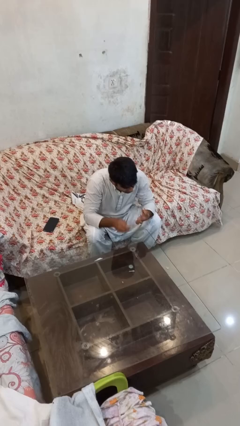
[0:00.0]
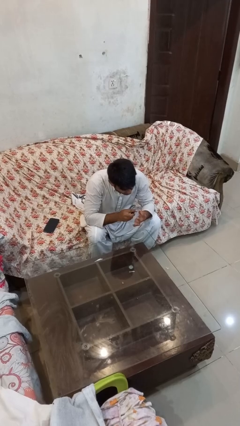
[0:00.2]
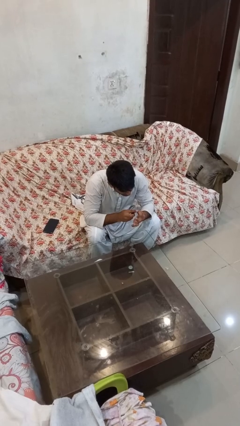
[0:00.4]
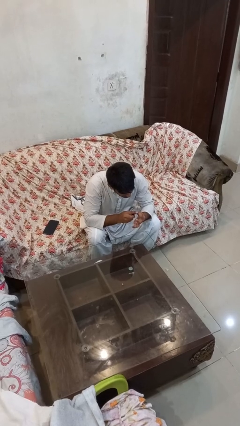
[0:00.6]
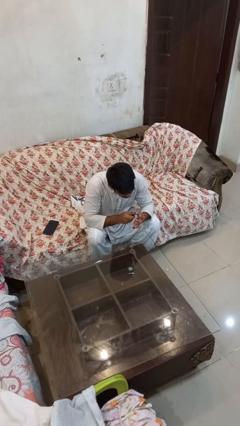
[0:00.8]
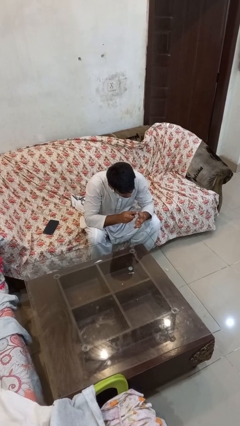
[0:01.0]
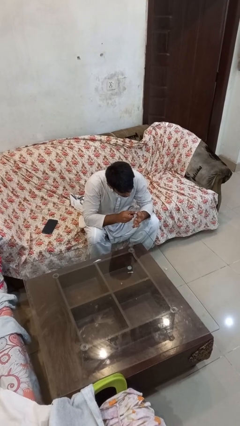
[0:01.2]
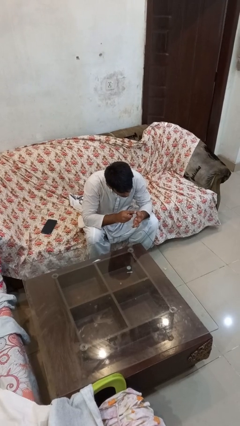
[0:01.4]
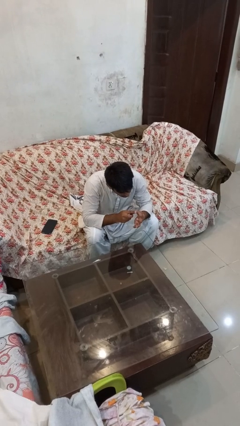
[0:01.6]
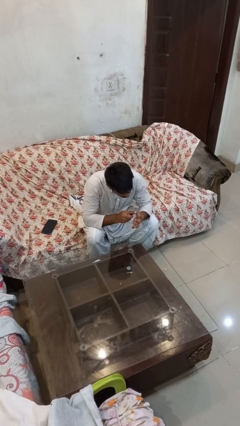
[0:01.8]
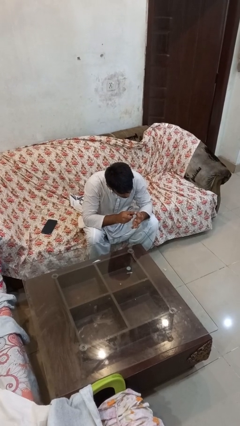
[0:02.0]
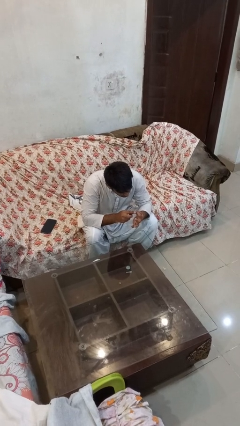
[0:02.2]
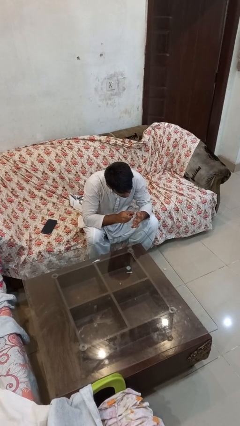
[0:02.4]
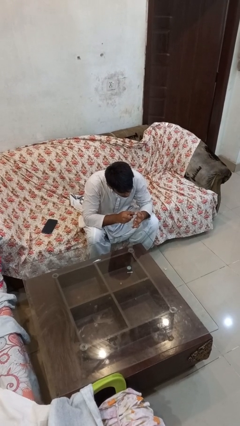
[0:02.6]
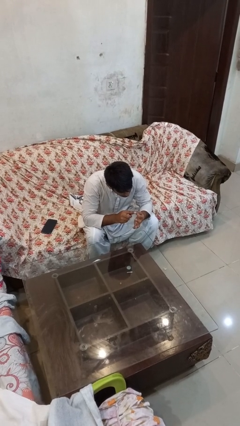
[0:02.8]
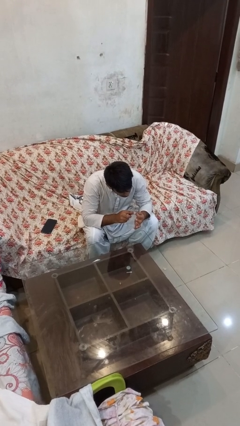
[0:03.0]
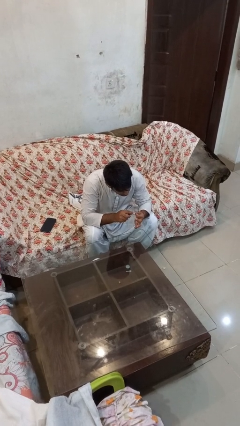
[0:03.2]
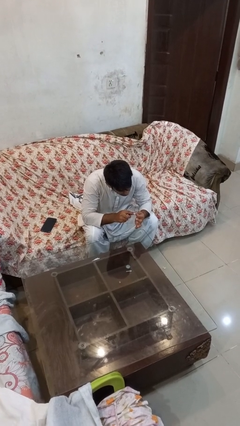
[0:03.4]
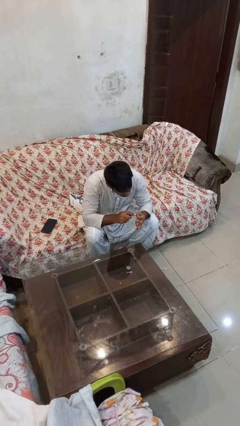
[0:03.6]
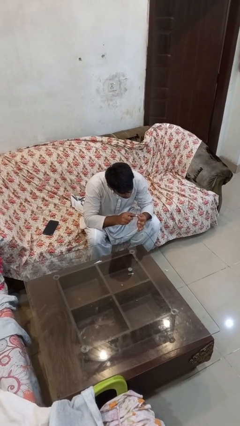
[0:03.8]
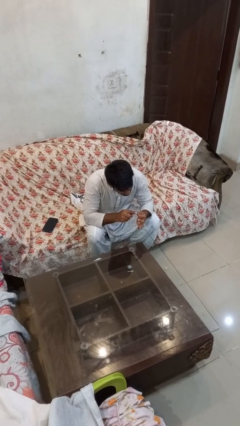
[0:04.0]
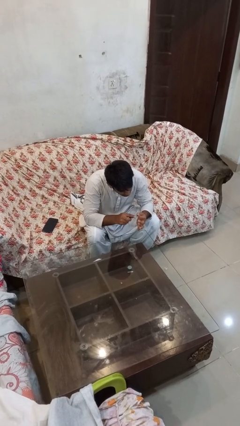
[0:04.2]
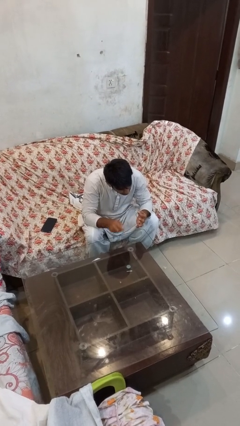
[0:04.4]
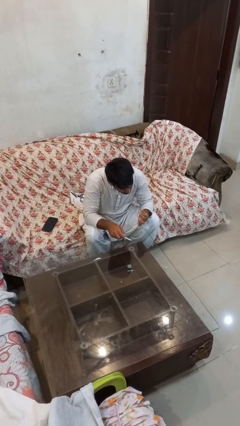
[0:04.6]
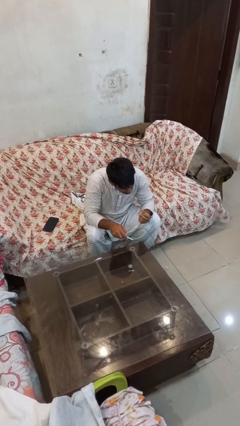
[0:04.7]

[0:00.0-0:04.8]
person files fingernails

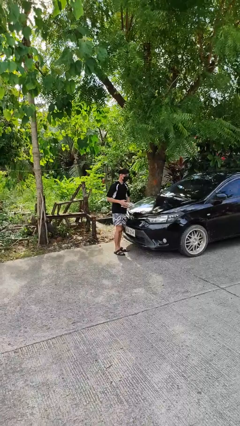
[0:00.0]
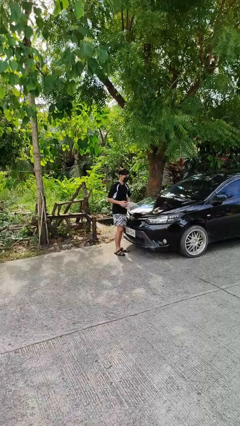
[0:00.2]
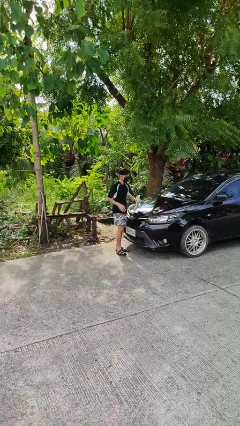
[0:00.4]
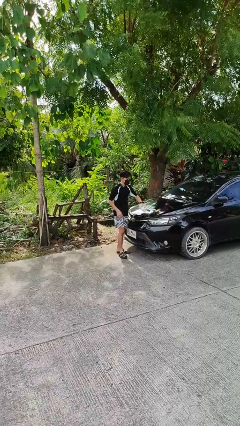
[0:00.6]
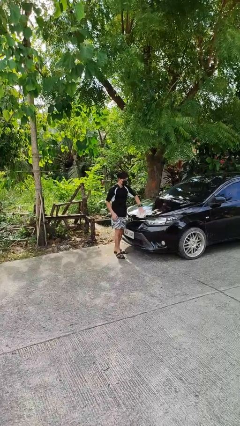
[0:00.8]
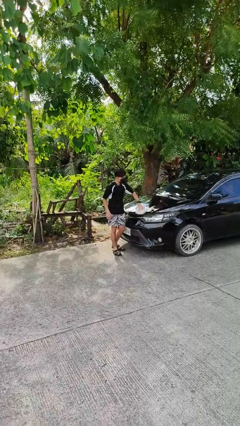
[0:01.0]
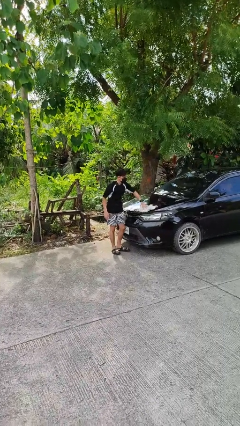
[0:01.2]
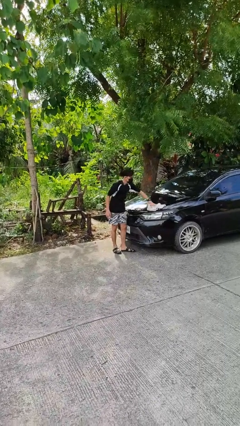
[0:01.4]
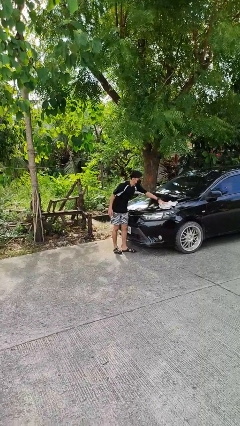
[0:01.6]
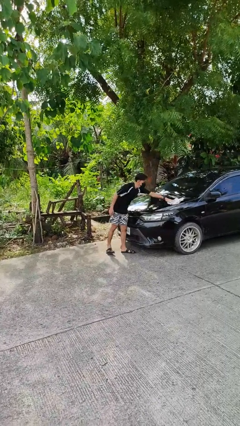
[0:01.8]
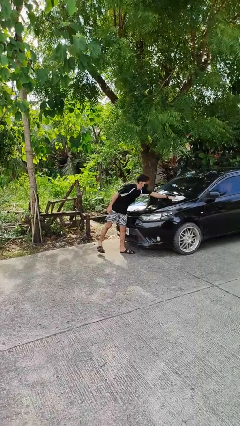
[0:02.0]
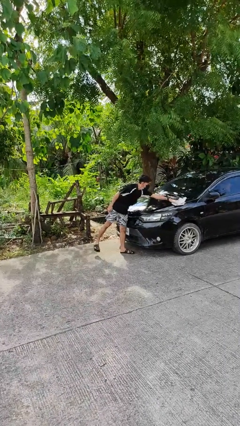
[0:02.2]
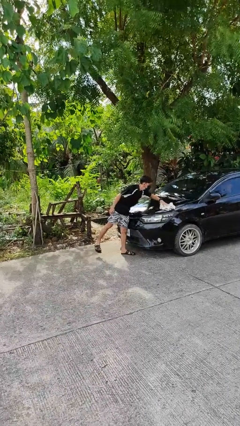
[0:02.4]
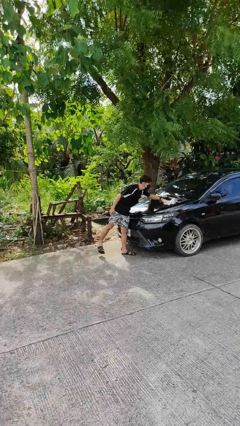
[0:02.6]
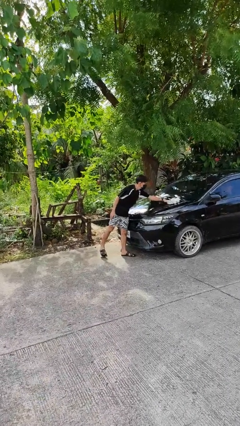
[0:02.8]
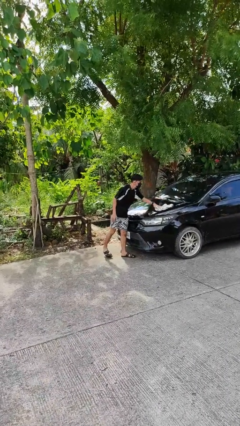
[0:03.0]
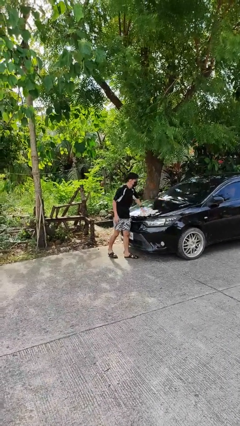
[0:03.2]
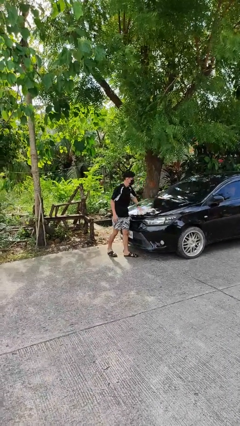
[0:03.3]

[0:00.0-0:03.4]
person polishes car with rag

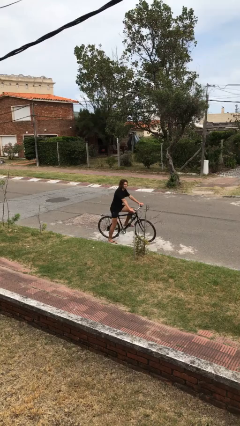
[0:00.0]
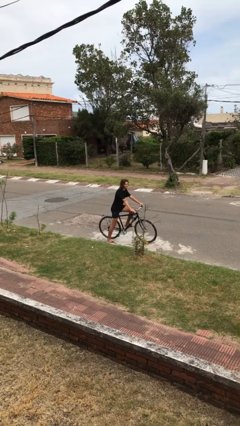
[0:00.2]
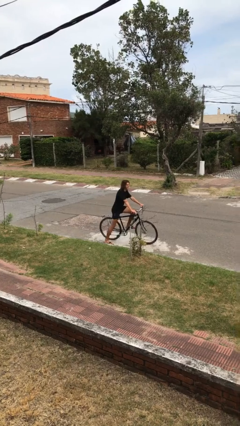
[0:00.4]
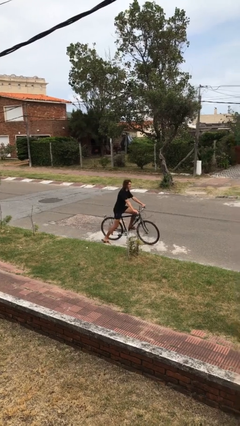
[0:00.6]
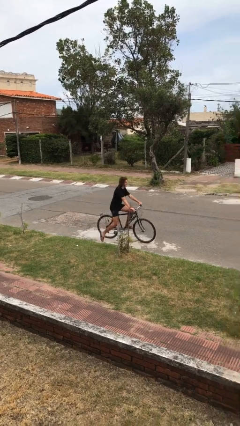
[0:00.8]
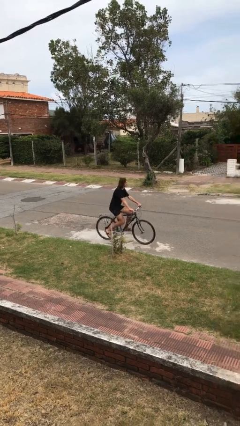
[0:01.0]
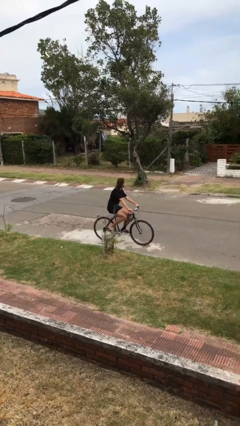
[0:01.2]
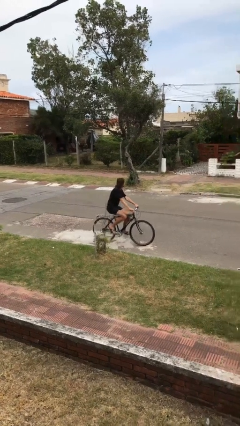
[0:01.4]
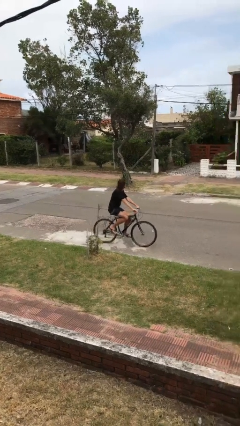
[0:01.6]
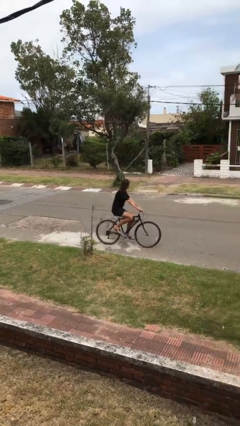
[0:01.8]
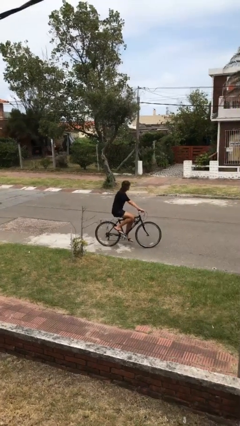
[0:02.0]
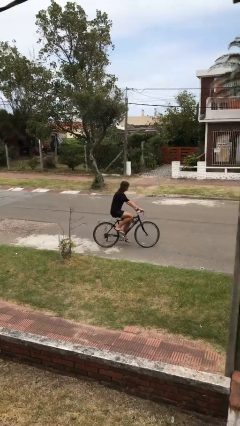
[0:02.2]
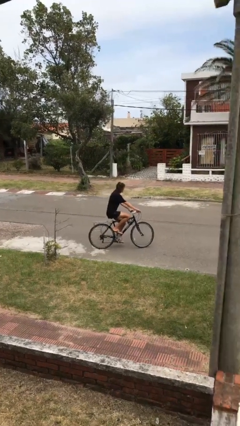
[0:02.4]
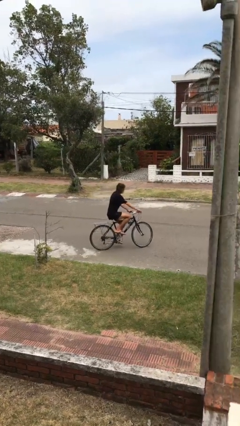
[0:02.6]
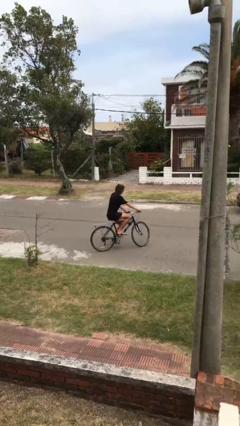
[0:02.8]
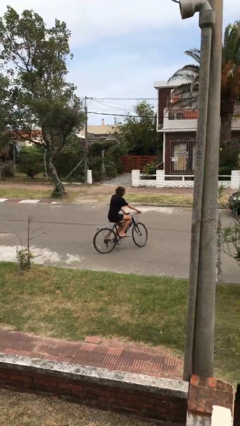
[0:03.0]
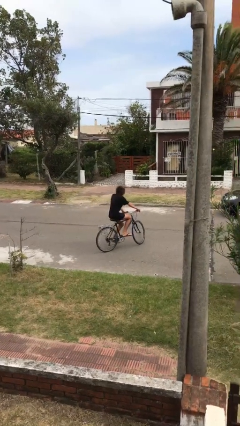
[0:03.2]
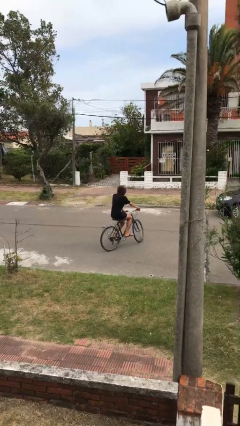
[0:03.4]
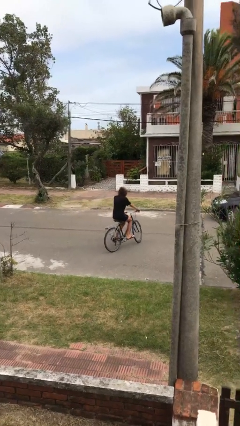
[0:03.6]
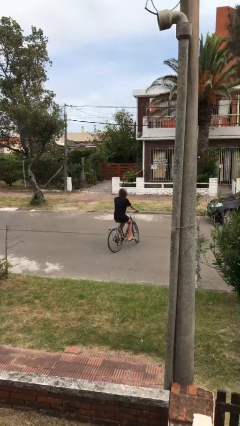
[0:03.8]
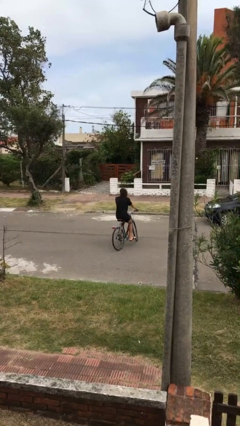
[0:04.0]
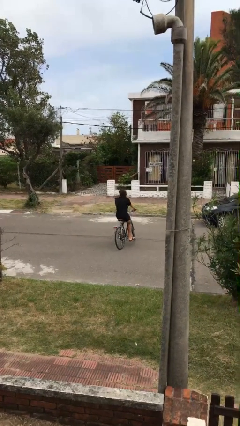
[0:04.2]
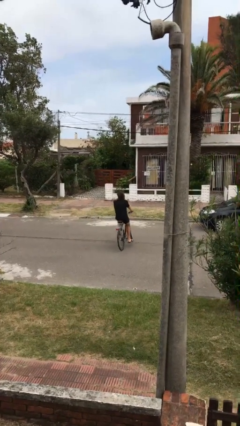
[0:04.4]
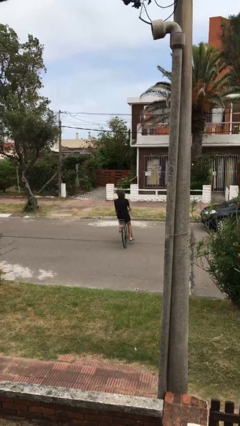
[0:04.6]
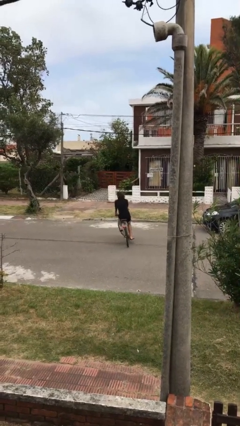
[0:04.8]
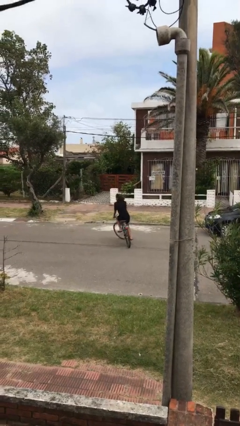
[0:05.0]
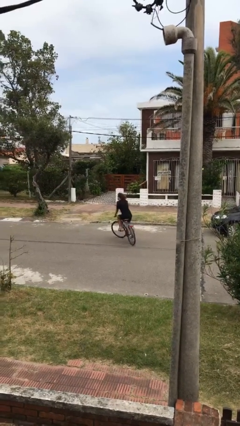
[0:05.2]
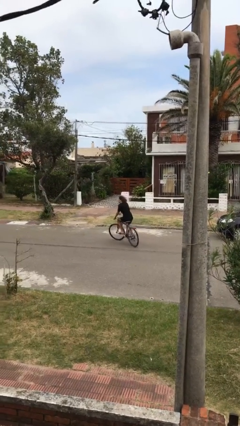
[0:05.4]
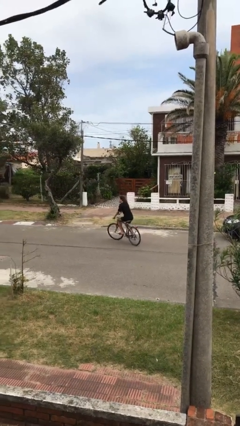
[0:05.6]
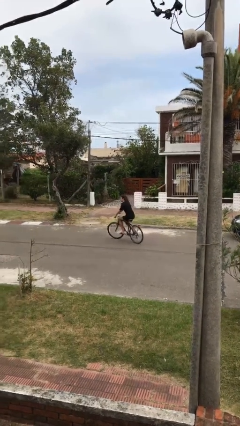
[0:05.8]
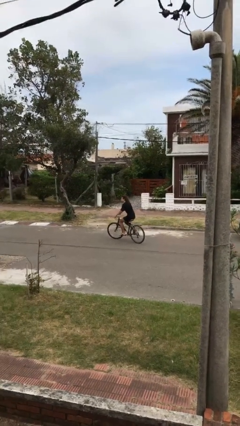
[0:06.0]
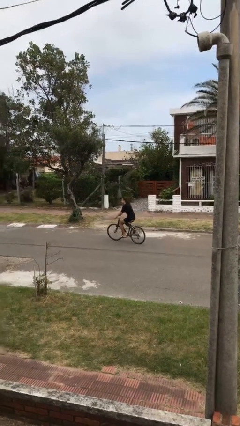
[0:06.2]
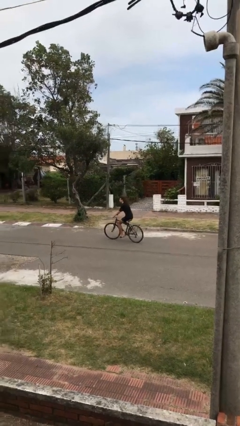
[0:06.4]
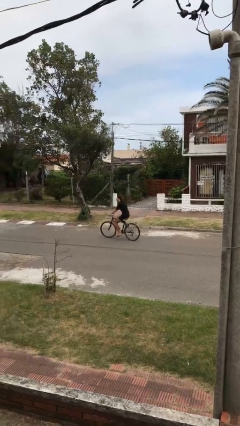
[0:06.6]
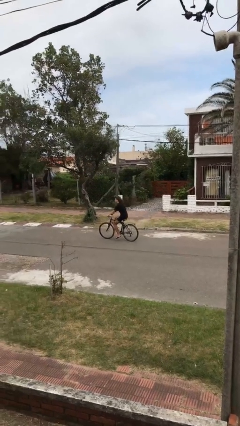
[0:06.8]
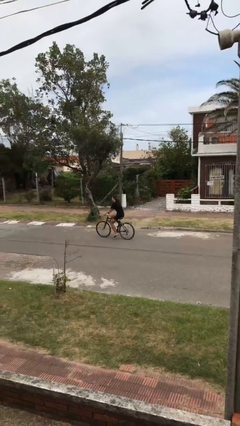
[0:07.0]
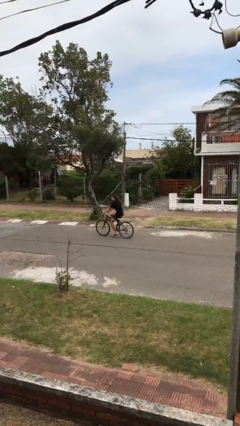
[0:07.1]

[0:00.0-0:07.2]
person rides bicycle

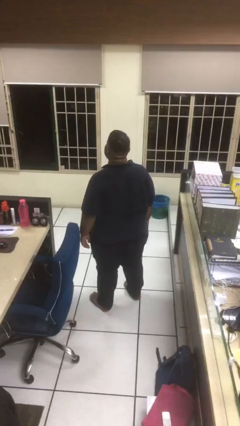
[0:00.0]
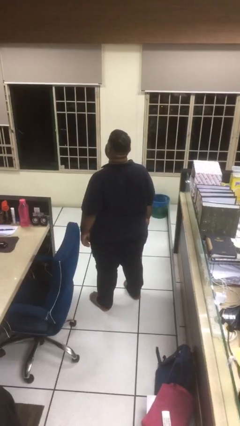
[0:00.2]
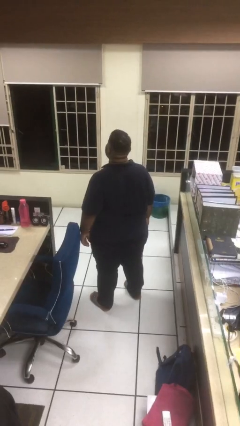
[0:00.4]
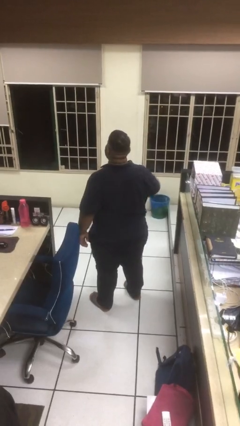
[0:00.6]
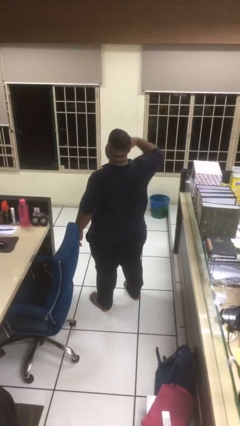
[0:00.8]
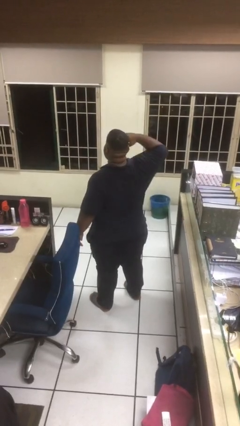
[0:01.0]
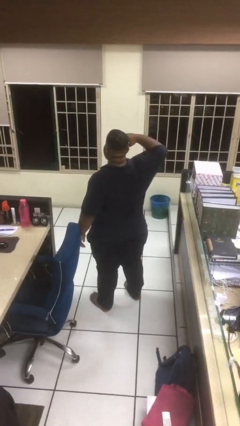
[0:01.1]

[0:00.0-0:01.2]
person salutes

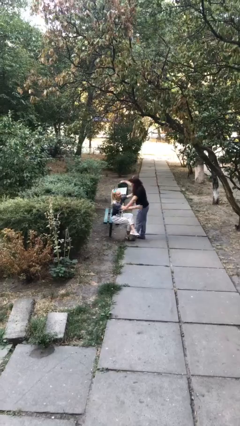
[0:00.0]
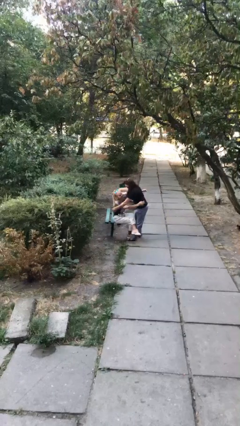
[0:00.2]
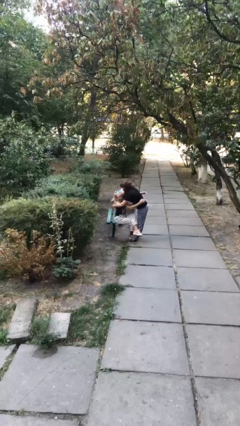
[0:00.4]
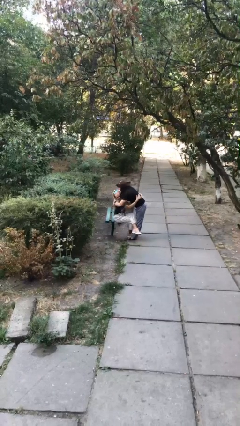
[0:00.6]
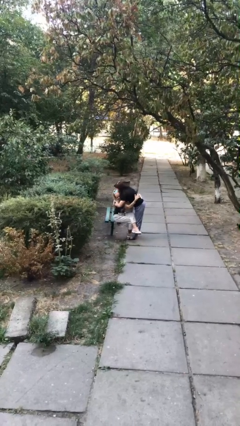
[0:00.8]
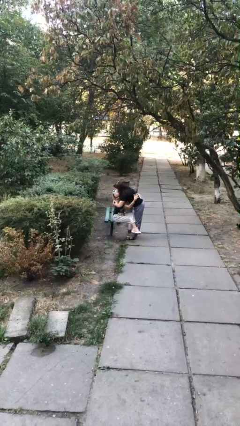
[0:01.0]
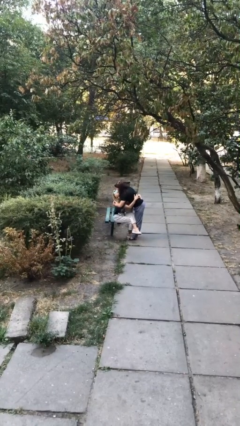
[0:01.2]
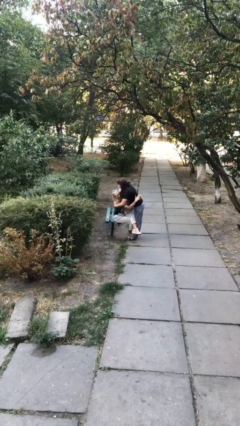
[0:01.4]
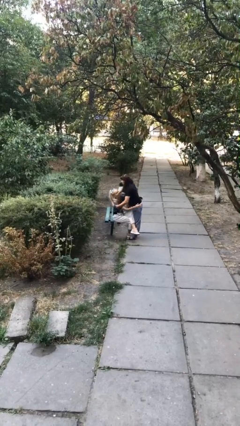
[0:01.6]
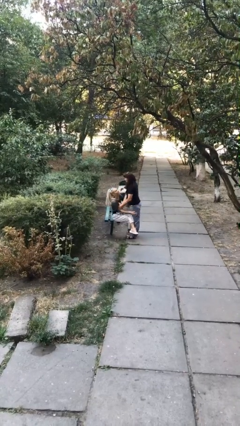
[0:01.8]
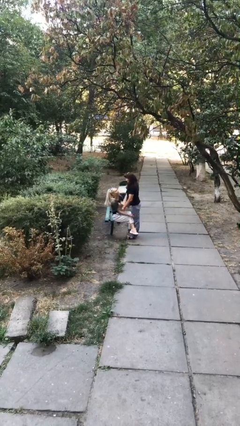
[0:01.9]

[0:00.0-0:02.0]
person embraces person
